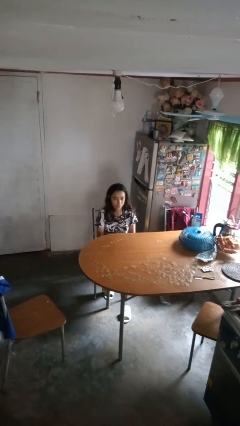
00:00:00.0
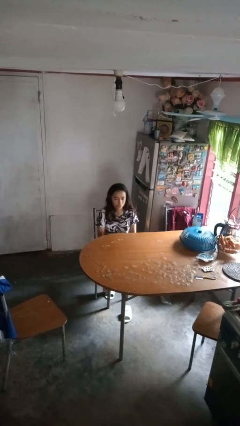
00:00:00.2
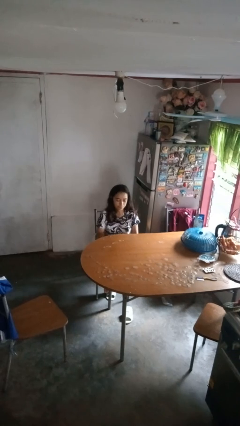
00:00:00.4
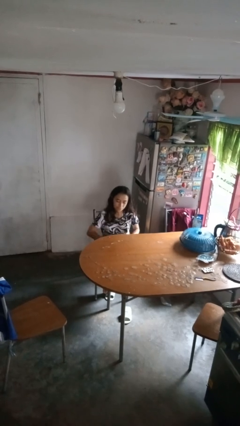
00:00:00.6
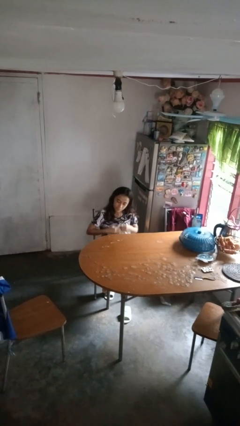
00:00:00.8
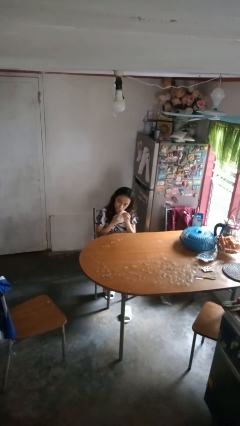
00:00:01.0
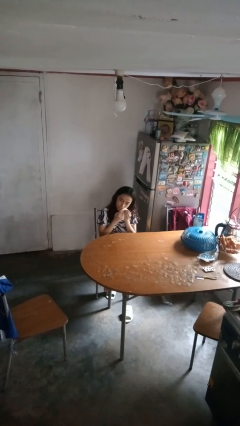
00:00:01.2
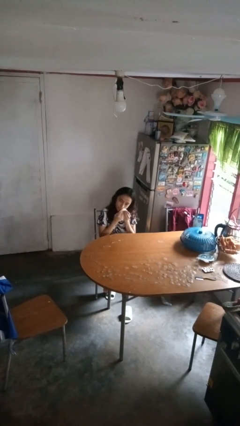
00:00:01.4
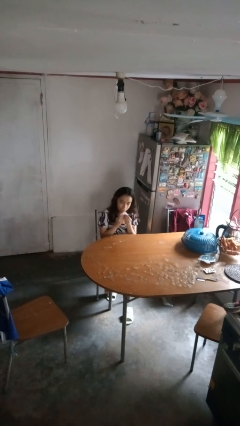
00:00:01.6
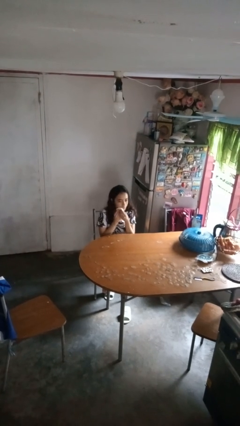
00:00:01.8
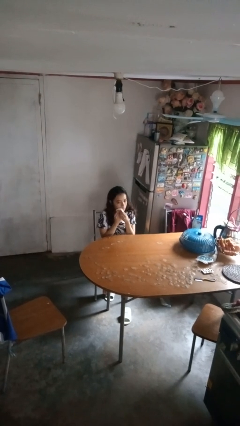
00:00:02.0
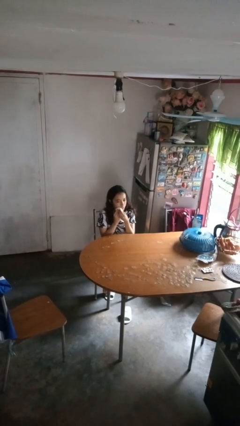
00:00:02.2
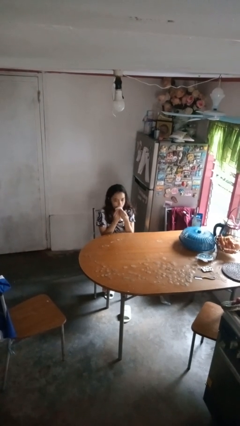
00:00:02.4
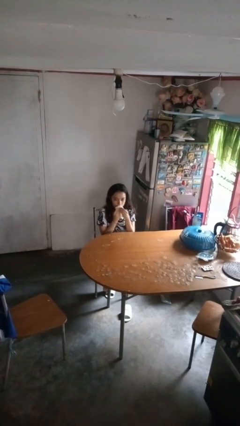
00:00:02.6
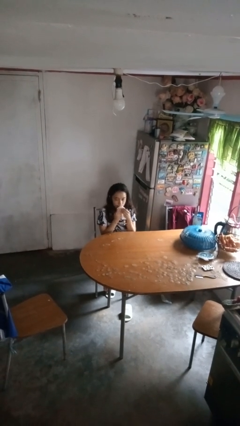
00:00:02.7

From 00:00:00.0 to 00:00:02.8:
person wipes mouth with napkin

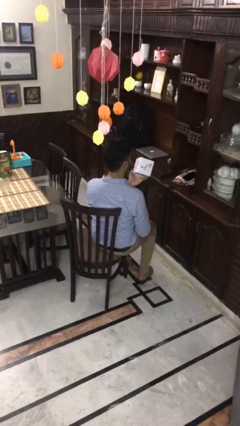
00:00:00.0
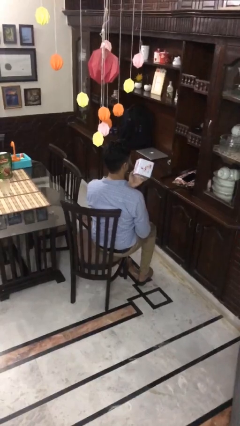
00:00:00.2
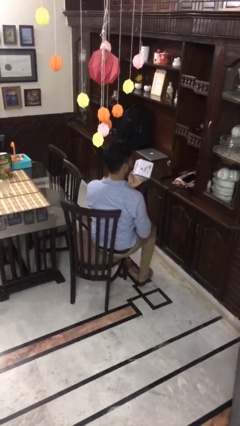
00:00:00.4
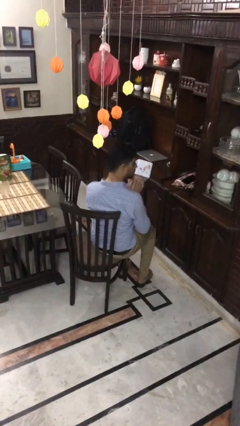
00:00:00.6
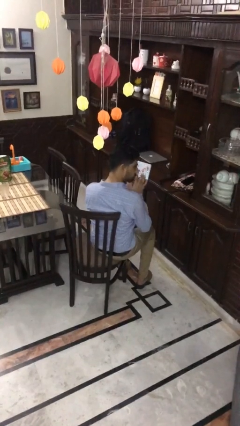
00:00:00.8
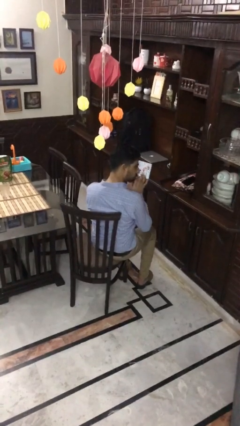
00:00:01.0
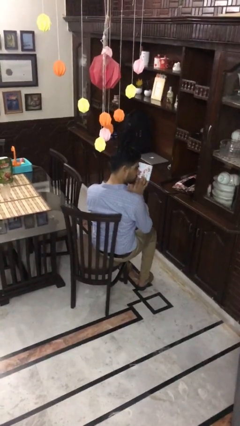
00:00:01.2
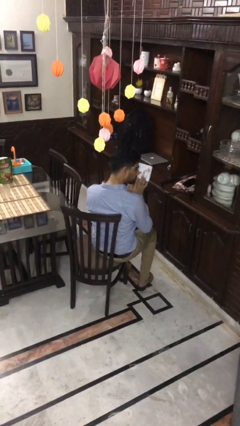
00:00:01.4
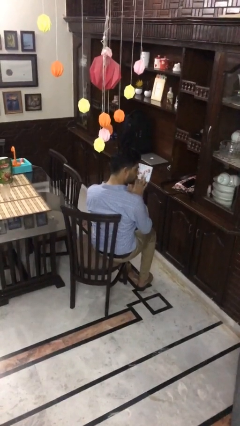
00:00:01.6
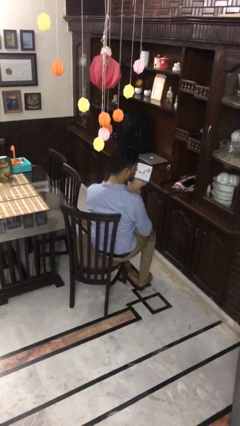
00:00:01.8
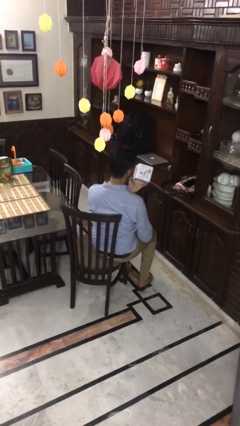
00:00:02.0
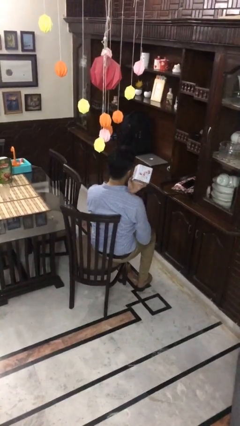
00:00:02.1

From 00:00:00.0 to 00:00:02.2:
person taps object with finger

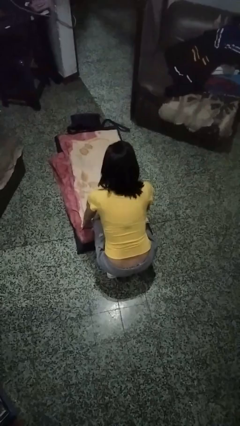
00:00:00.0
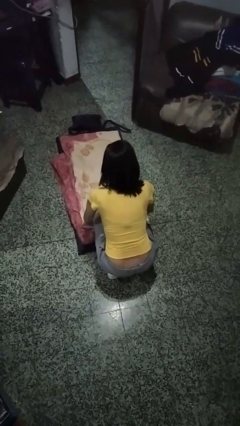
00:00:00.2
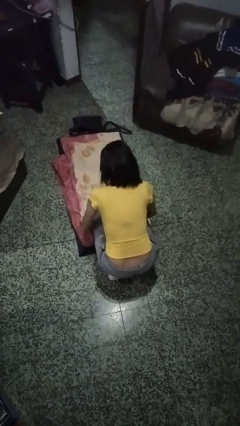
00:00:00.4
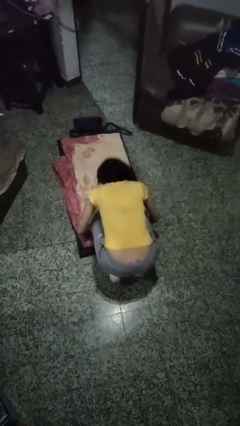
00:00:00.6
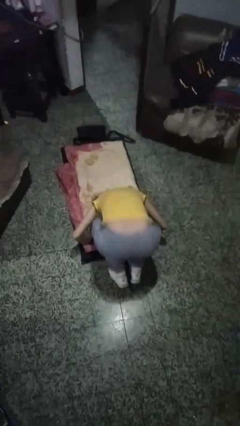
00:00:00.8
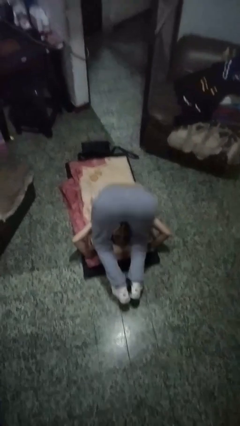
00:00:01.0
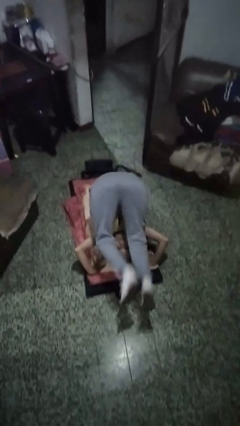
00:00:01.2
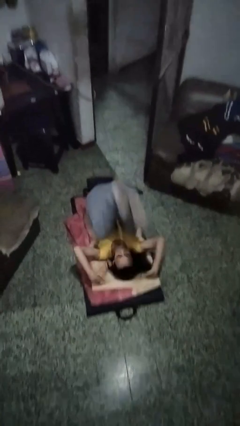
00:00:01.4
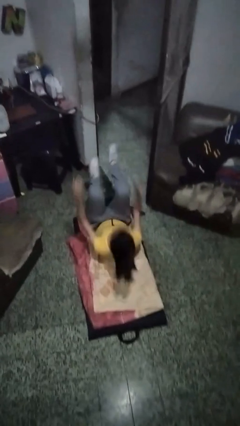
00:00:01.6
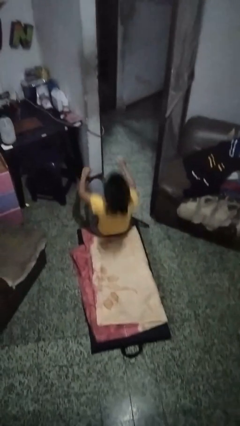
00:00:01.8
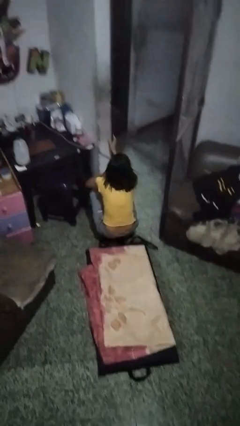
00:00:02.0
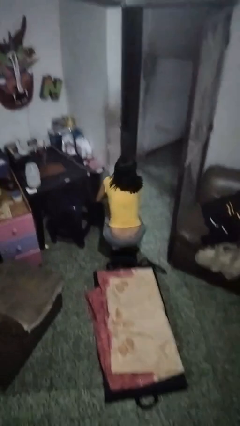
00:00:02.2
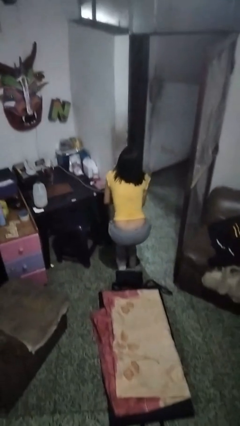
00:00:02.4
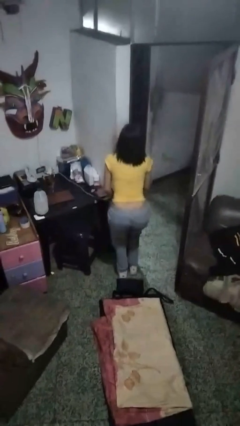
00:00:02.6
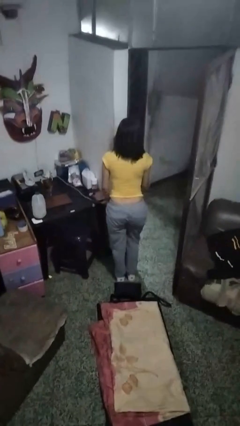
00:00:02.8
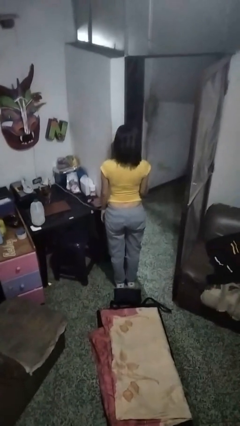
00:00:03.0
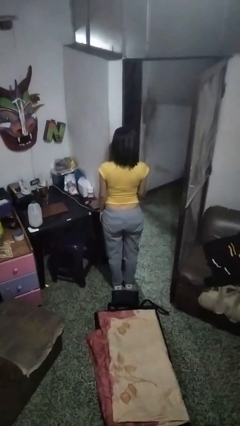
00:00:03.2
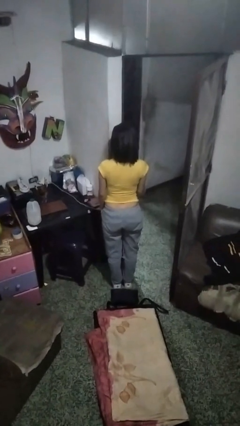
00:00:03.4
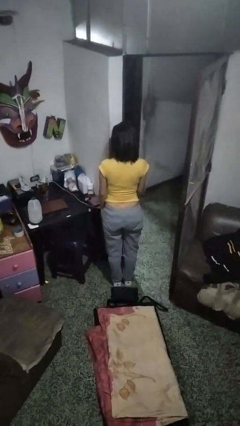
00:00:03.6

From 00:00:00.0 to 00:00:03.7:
person somersaults

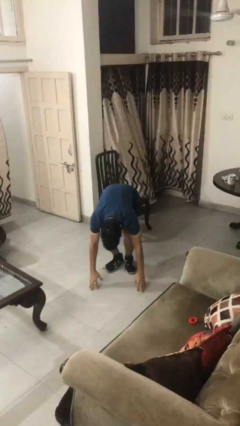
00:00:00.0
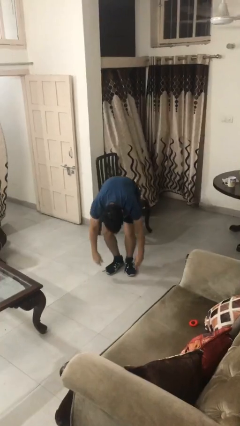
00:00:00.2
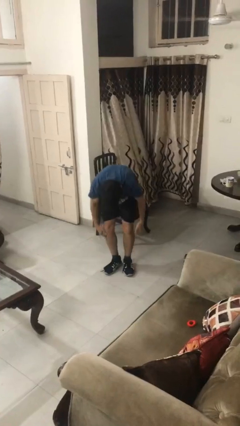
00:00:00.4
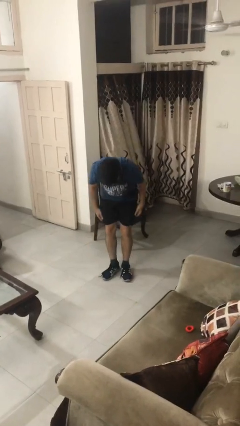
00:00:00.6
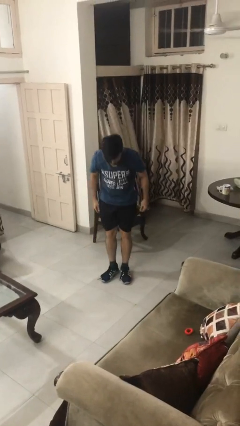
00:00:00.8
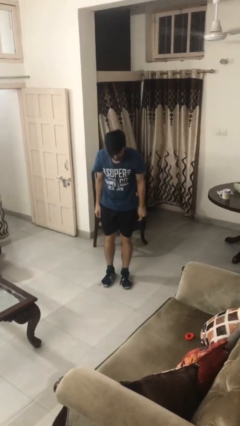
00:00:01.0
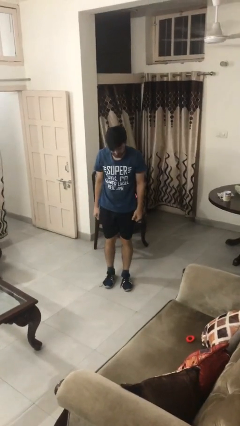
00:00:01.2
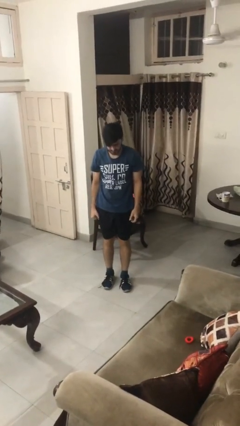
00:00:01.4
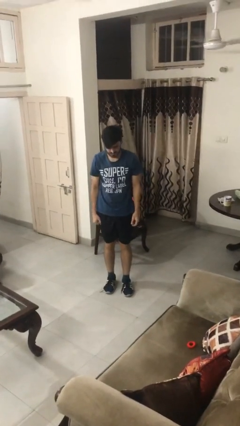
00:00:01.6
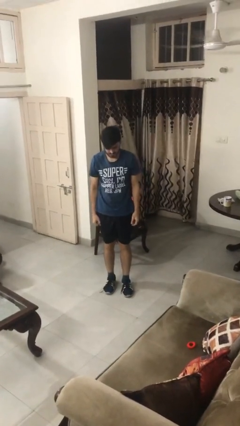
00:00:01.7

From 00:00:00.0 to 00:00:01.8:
person stands up from floor

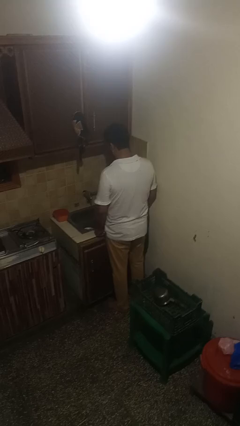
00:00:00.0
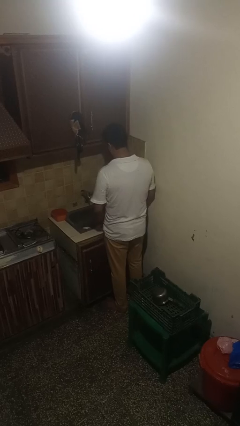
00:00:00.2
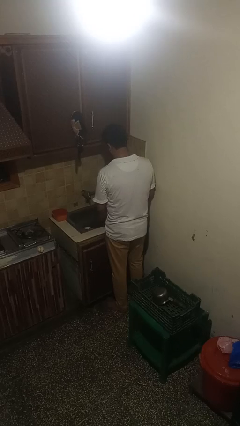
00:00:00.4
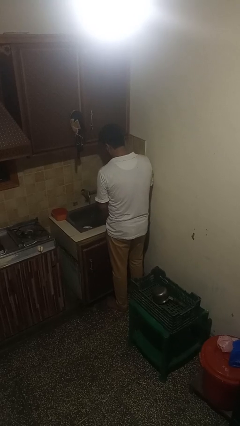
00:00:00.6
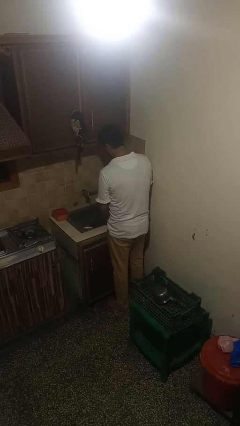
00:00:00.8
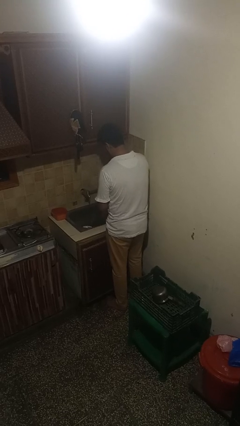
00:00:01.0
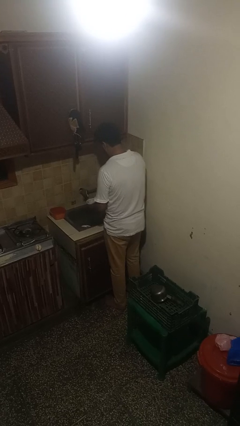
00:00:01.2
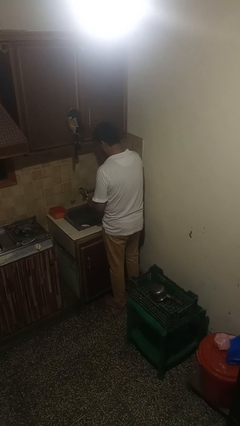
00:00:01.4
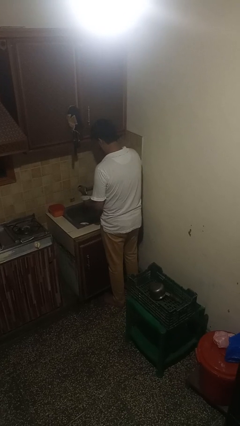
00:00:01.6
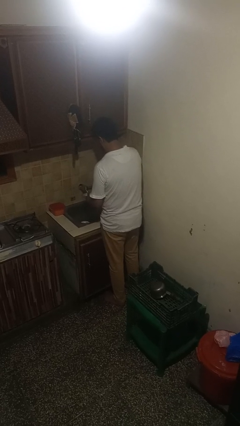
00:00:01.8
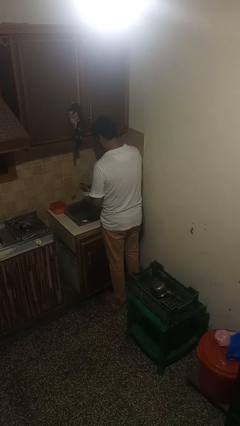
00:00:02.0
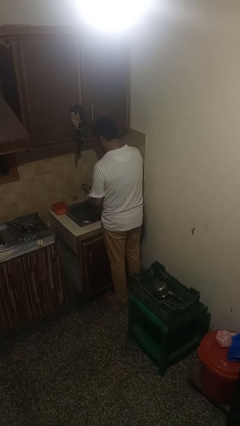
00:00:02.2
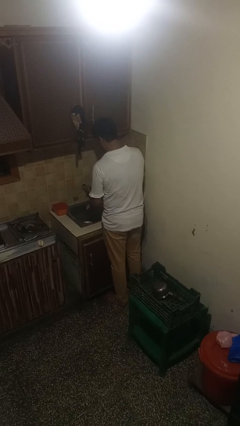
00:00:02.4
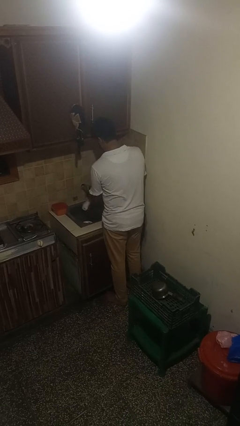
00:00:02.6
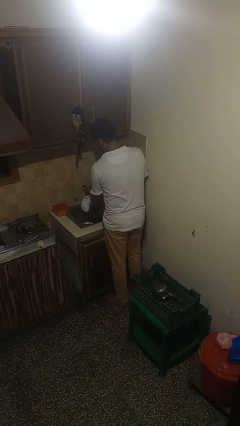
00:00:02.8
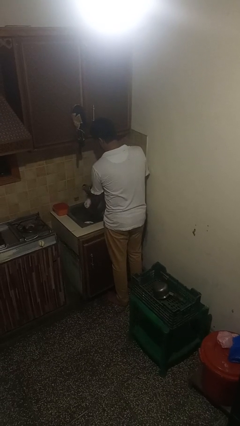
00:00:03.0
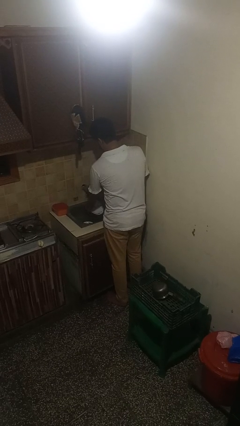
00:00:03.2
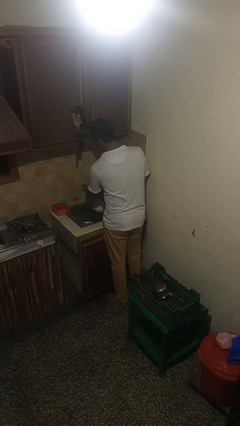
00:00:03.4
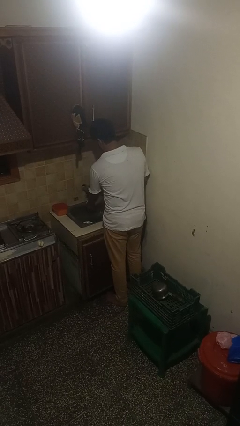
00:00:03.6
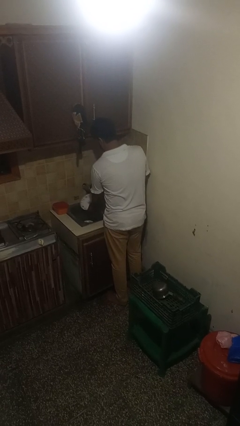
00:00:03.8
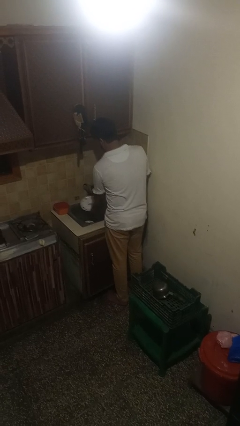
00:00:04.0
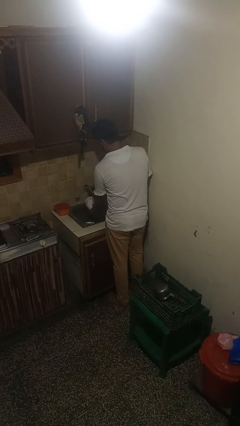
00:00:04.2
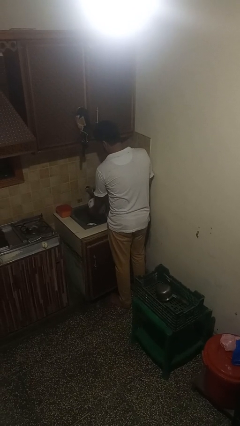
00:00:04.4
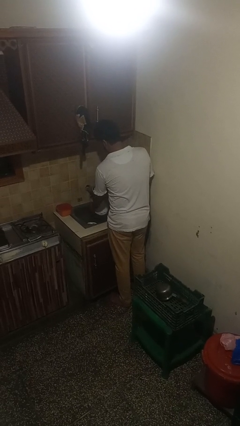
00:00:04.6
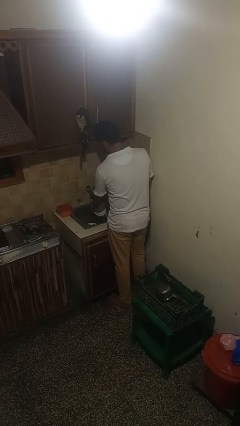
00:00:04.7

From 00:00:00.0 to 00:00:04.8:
person washes dish

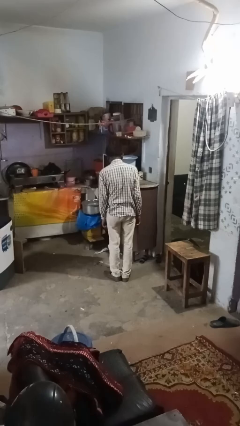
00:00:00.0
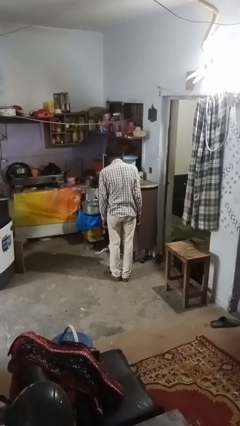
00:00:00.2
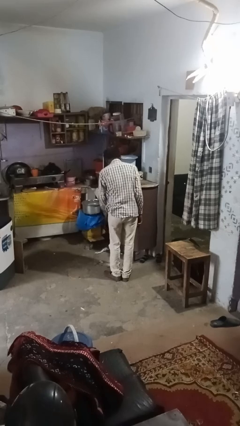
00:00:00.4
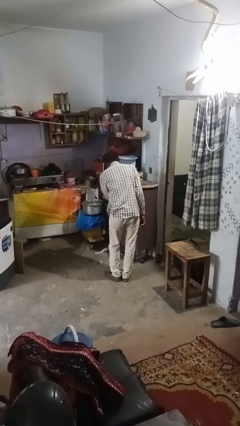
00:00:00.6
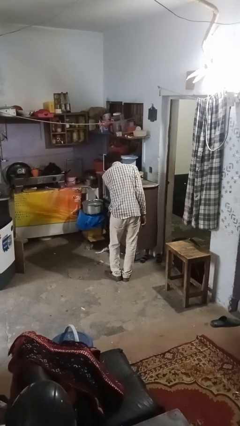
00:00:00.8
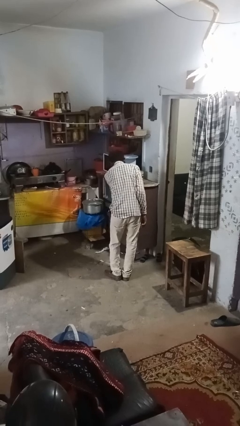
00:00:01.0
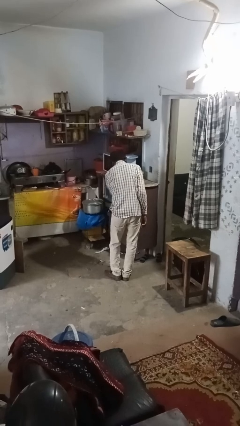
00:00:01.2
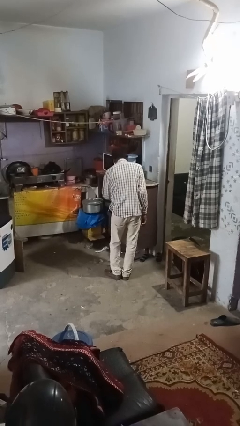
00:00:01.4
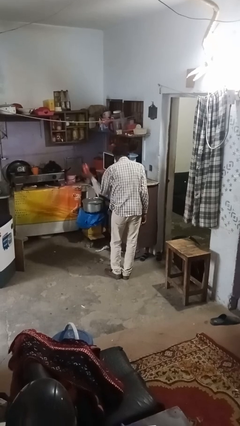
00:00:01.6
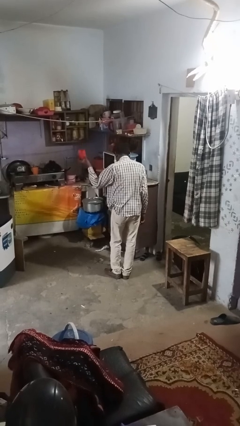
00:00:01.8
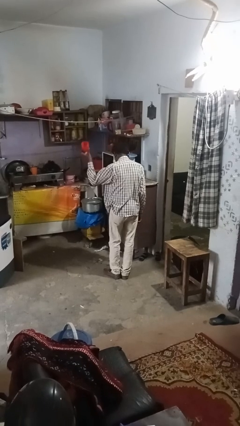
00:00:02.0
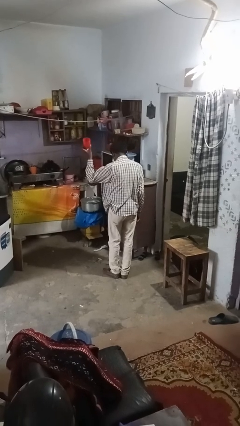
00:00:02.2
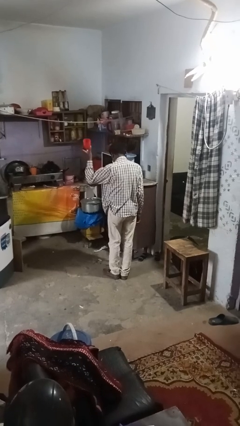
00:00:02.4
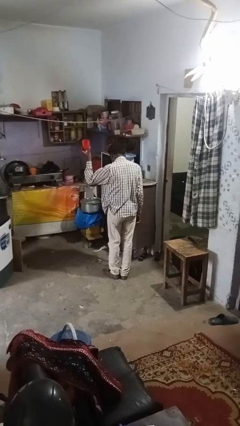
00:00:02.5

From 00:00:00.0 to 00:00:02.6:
person takes object from kitchen drawer
